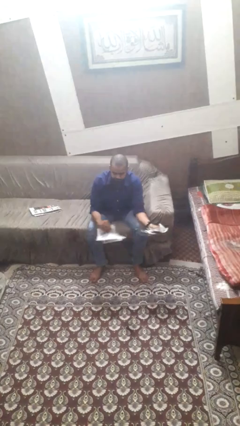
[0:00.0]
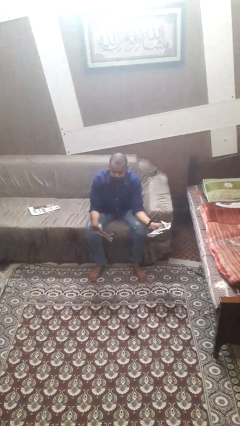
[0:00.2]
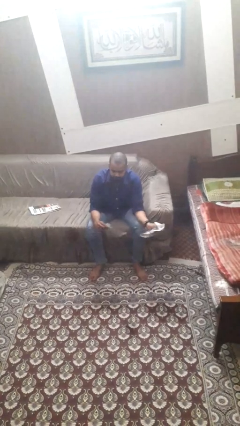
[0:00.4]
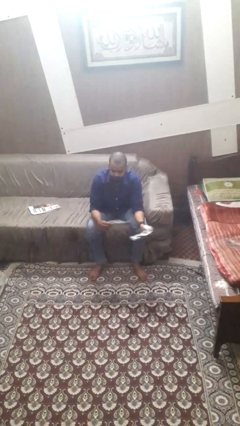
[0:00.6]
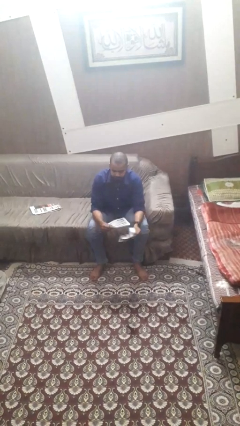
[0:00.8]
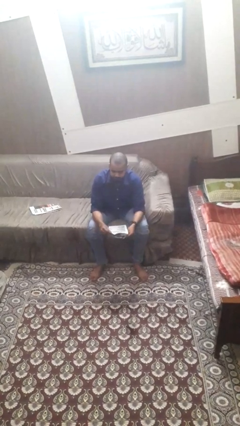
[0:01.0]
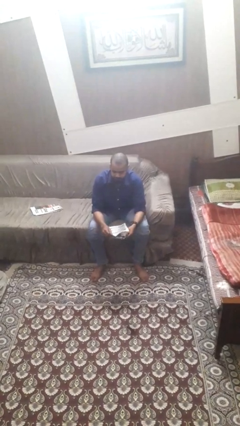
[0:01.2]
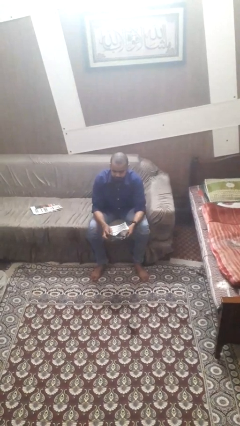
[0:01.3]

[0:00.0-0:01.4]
person tears paper

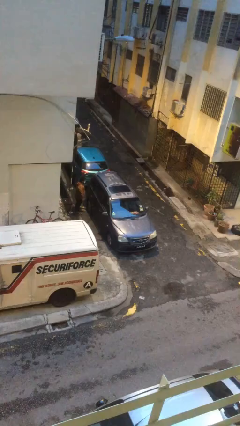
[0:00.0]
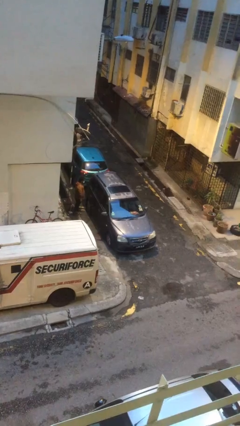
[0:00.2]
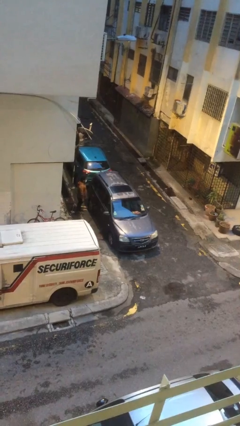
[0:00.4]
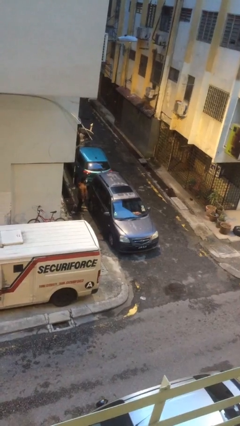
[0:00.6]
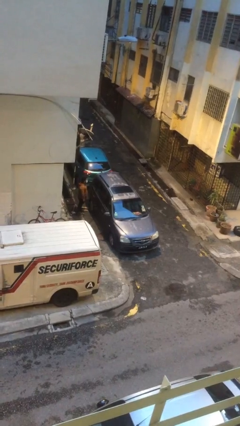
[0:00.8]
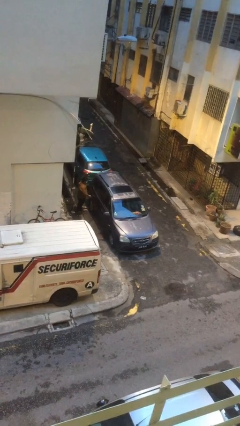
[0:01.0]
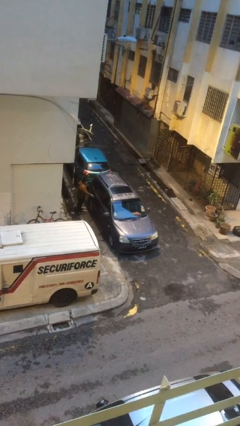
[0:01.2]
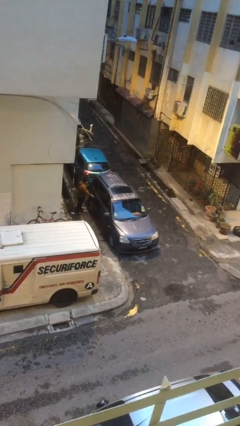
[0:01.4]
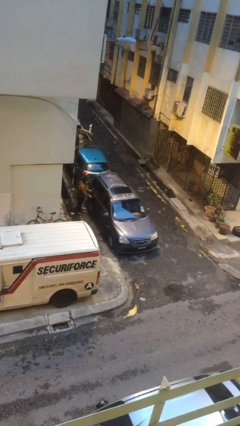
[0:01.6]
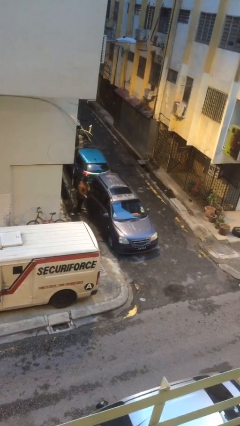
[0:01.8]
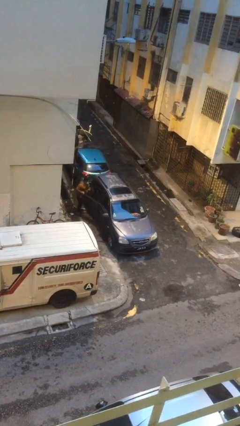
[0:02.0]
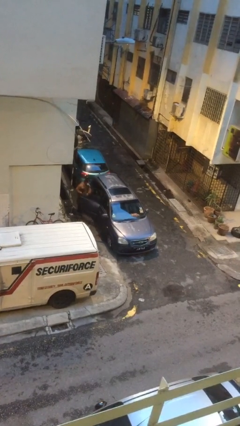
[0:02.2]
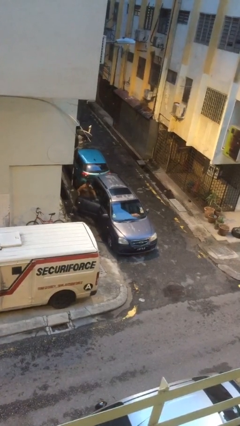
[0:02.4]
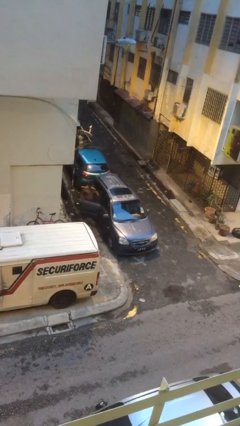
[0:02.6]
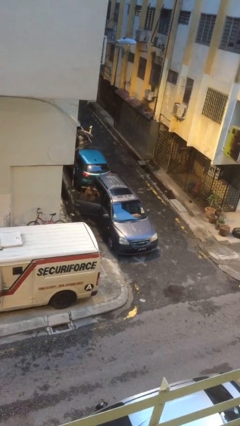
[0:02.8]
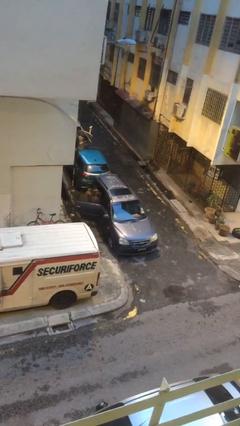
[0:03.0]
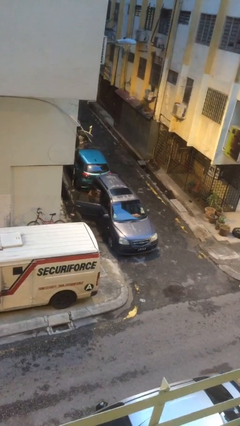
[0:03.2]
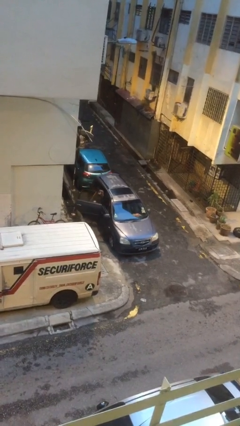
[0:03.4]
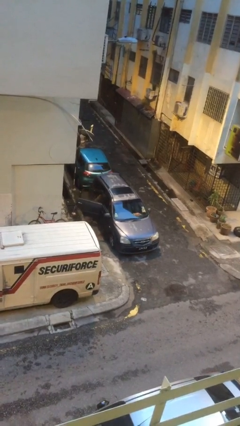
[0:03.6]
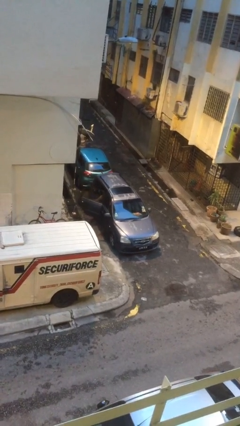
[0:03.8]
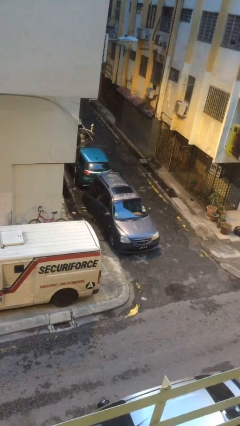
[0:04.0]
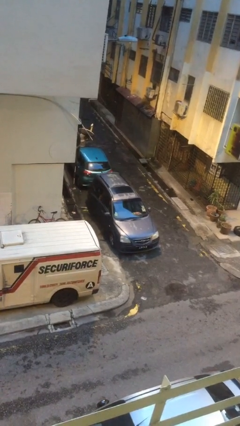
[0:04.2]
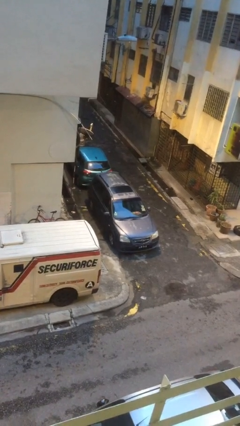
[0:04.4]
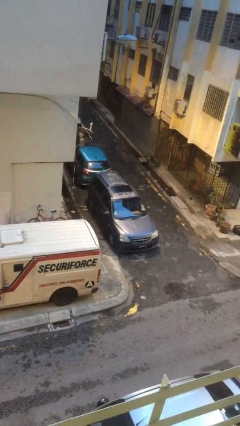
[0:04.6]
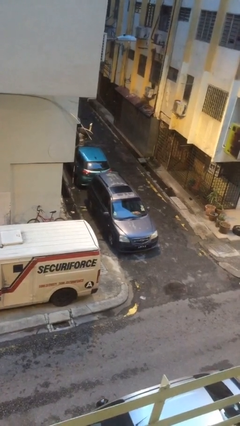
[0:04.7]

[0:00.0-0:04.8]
car picks up person

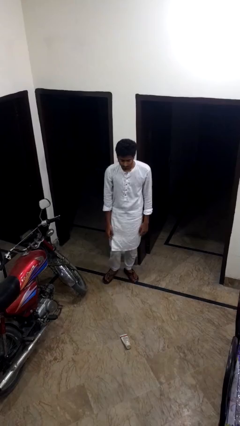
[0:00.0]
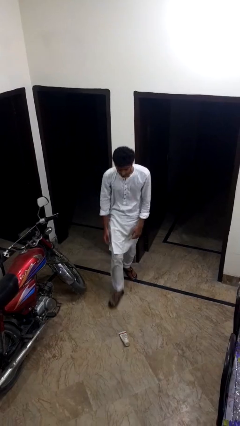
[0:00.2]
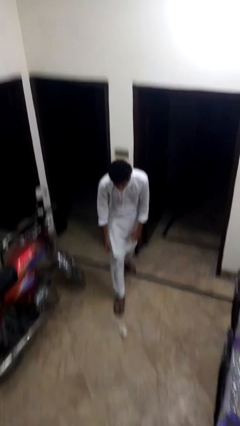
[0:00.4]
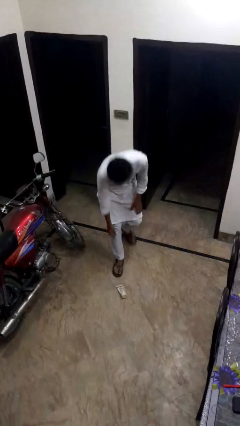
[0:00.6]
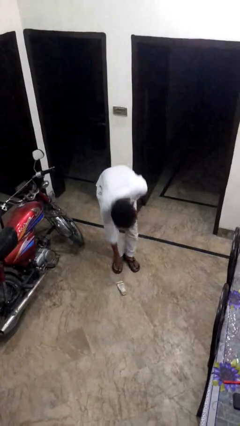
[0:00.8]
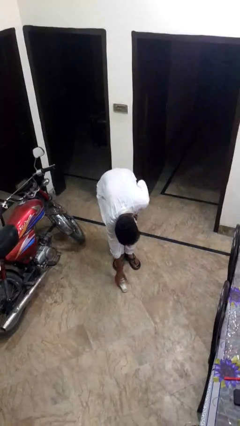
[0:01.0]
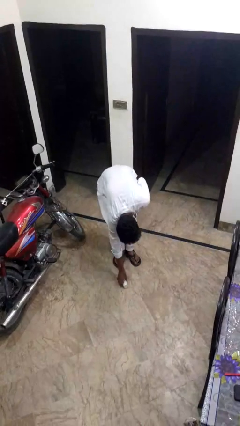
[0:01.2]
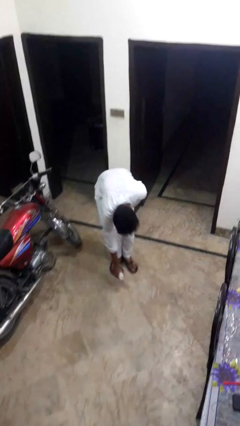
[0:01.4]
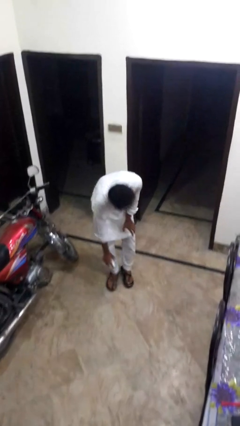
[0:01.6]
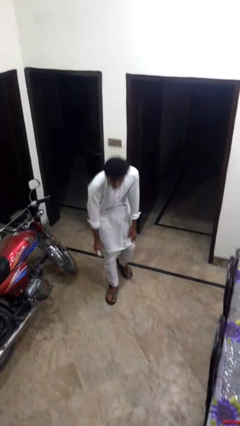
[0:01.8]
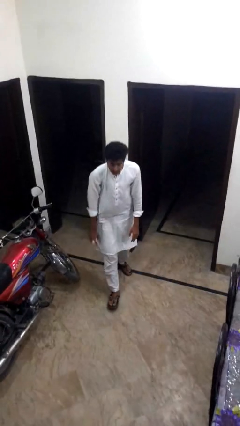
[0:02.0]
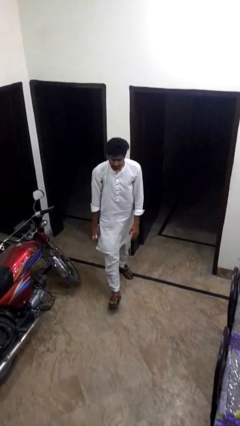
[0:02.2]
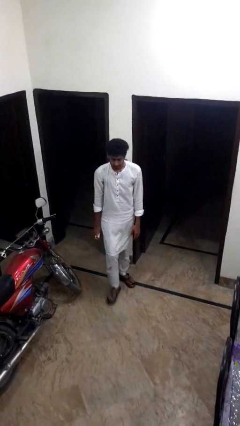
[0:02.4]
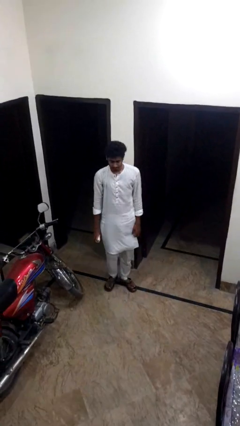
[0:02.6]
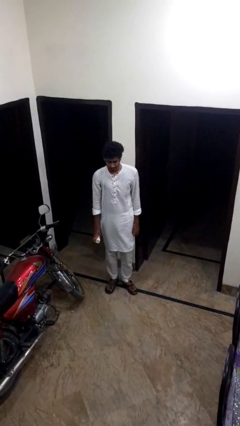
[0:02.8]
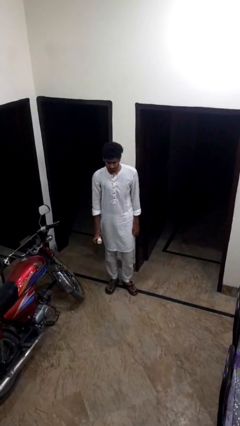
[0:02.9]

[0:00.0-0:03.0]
person picks up object from floor

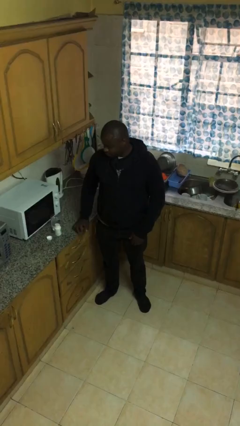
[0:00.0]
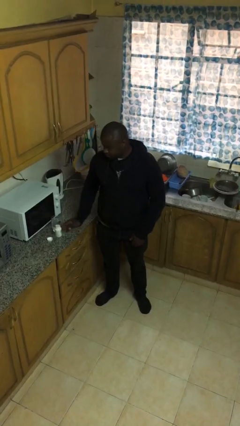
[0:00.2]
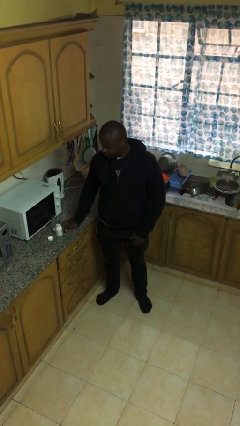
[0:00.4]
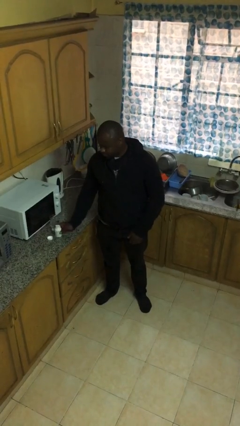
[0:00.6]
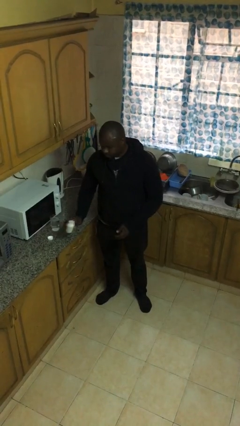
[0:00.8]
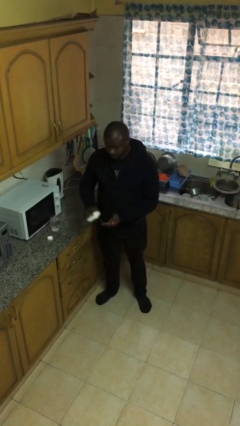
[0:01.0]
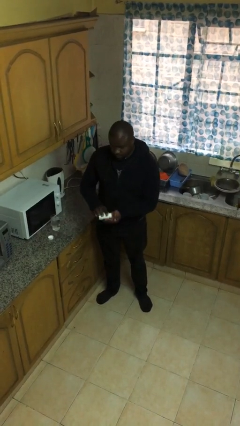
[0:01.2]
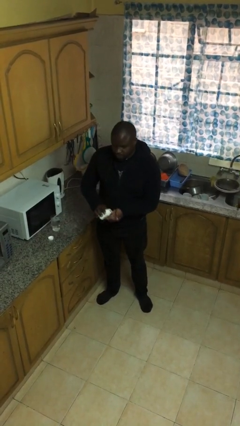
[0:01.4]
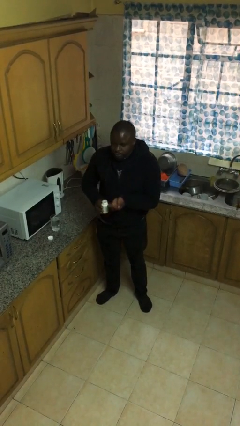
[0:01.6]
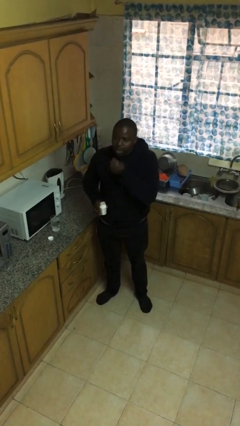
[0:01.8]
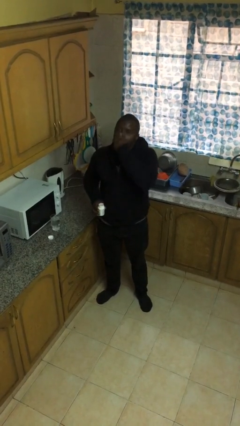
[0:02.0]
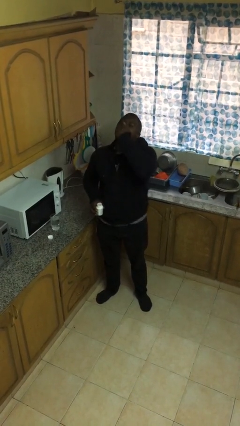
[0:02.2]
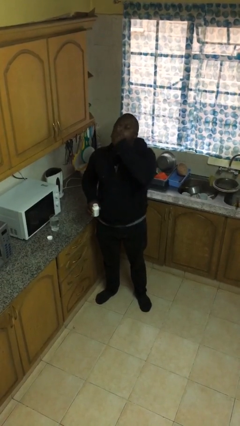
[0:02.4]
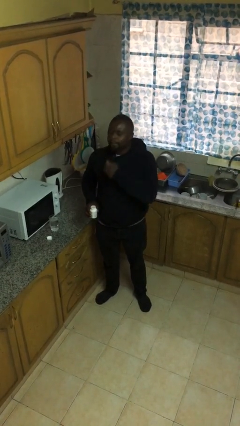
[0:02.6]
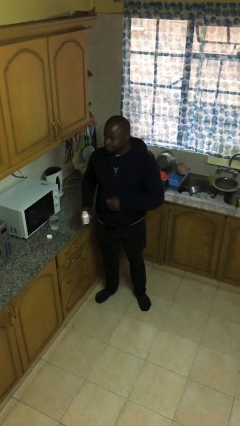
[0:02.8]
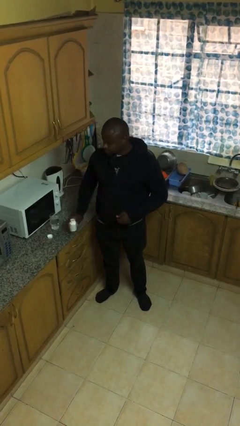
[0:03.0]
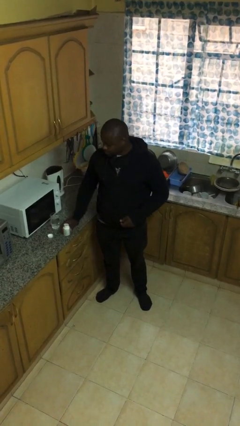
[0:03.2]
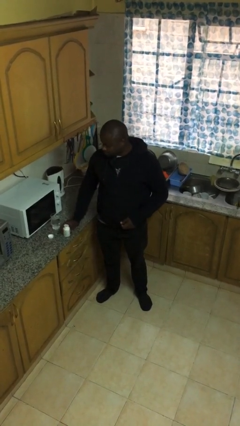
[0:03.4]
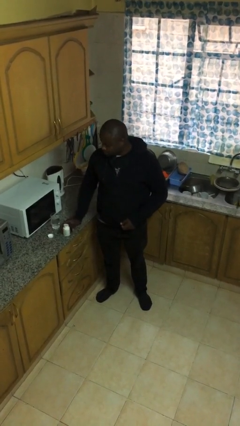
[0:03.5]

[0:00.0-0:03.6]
person takes medicine pills

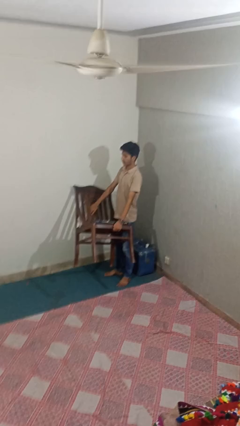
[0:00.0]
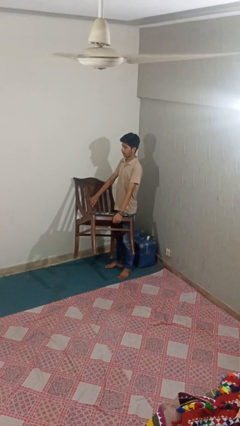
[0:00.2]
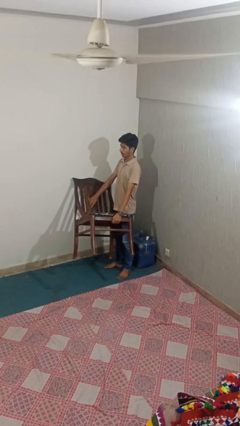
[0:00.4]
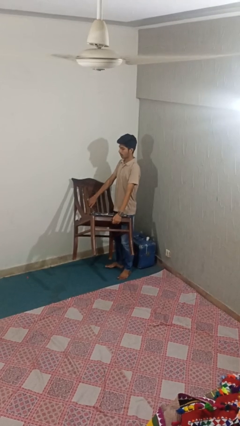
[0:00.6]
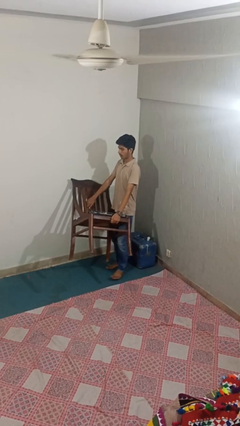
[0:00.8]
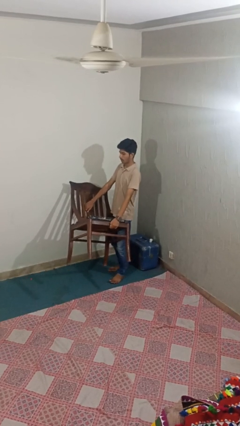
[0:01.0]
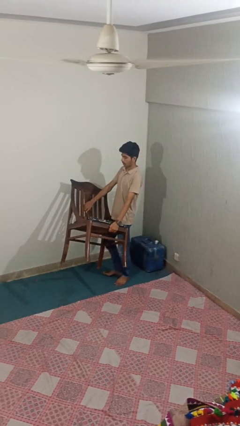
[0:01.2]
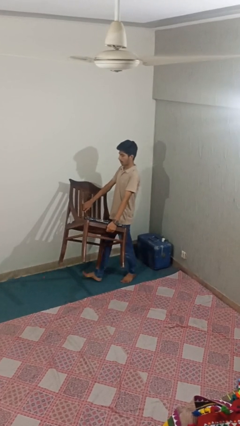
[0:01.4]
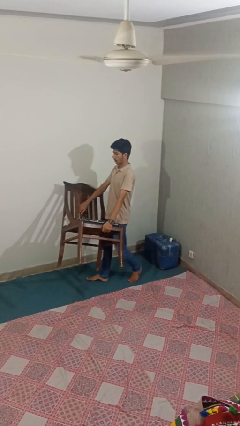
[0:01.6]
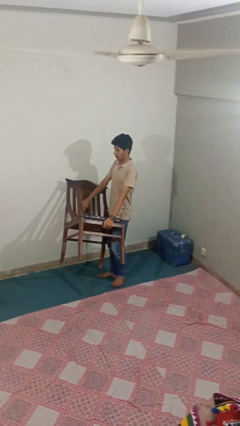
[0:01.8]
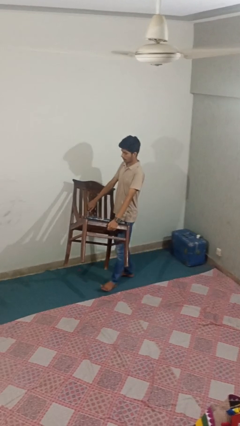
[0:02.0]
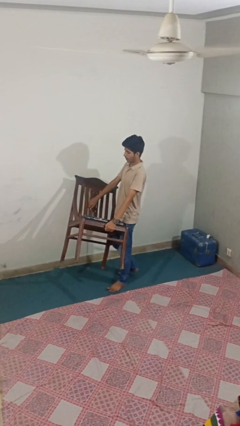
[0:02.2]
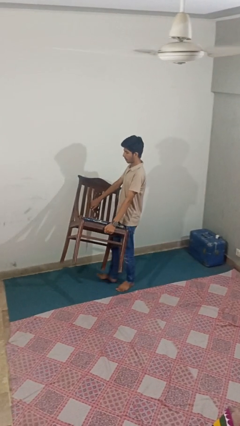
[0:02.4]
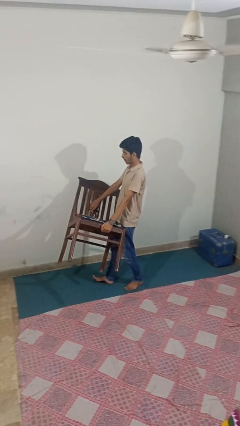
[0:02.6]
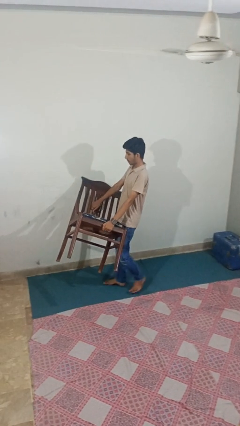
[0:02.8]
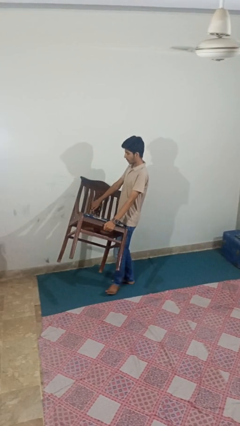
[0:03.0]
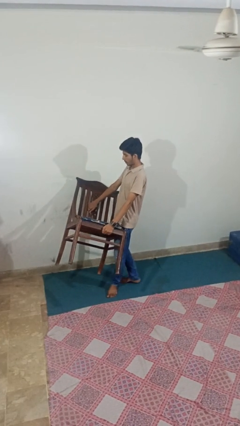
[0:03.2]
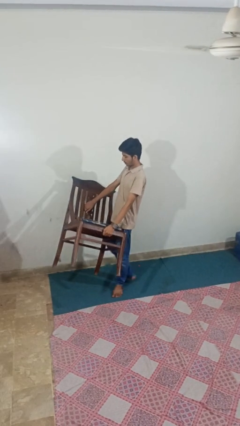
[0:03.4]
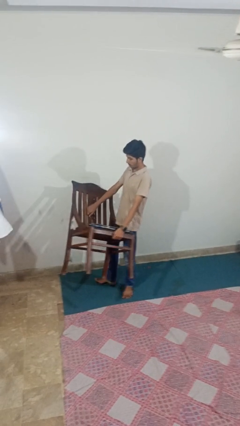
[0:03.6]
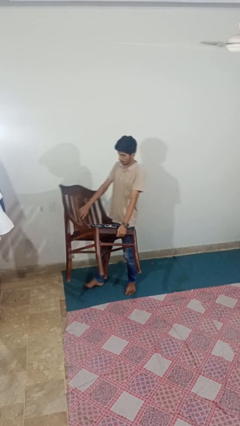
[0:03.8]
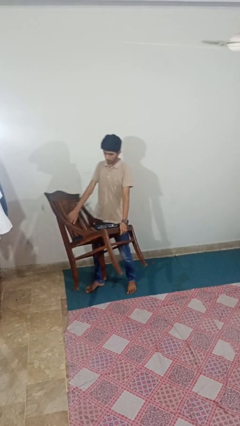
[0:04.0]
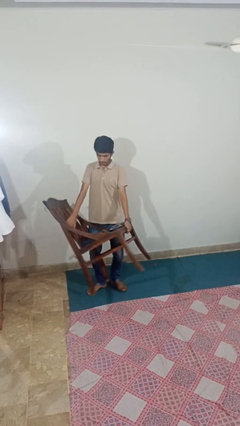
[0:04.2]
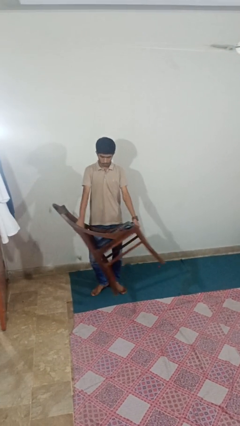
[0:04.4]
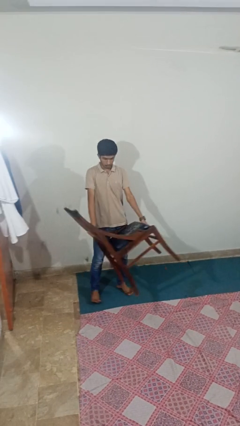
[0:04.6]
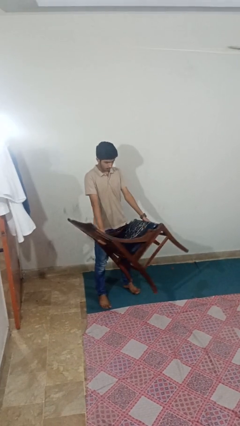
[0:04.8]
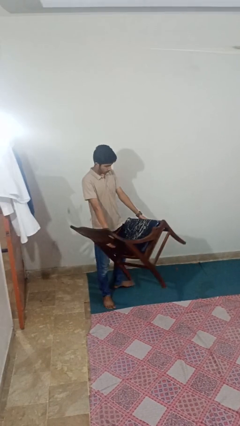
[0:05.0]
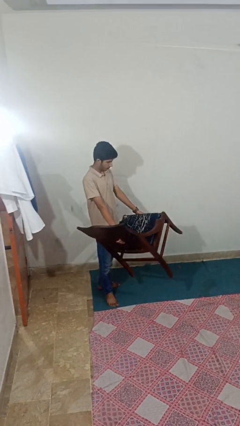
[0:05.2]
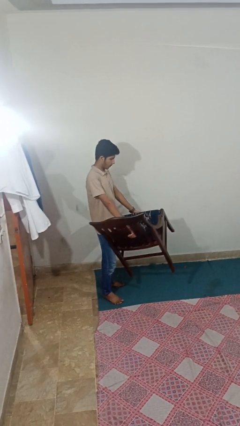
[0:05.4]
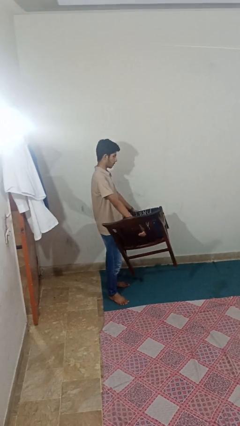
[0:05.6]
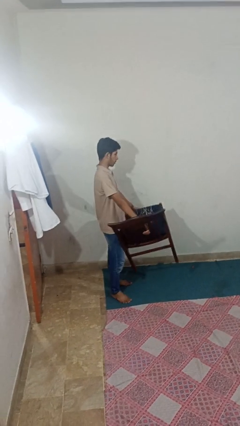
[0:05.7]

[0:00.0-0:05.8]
person carries furniture
